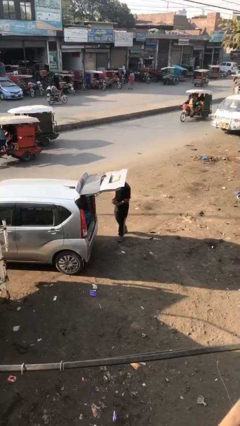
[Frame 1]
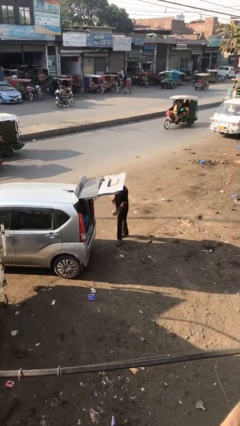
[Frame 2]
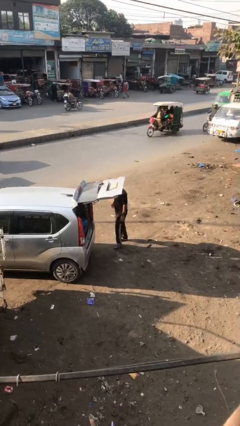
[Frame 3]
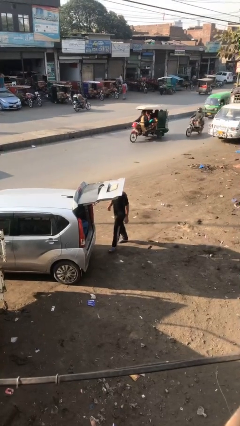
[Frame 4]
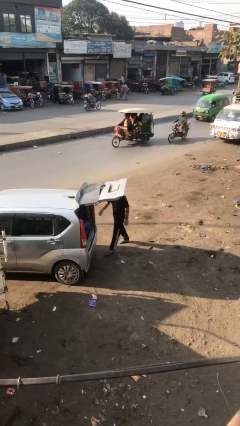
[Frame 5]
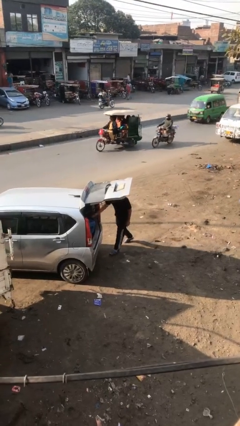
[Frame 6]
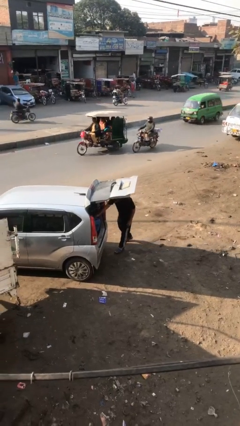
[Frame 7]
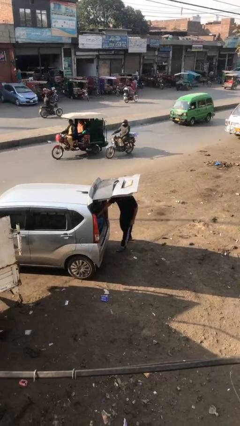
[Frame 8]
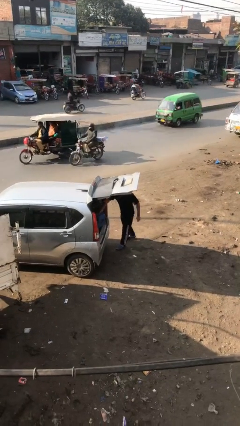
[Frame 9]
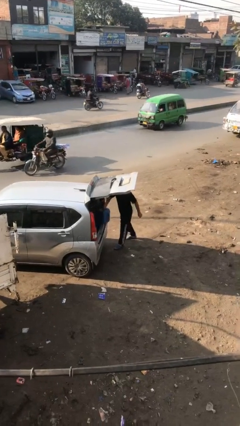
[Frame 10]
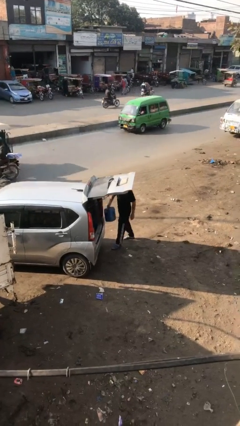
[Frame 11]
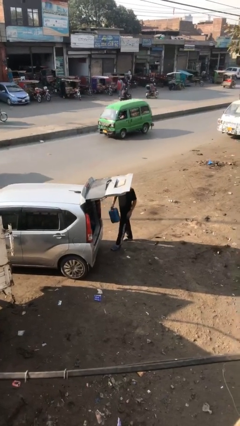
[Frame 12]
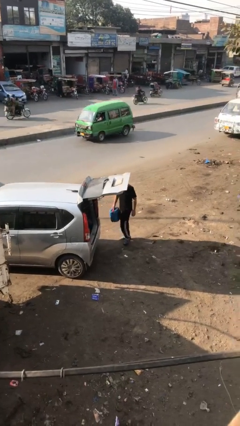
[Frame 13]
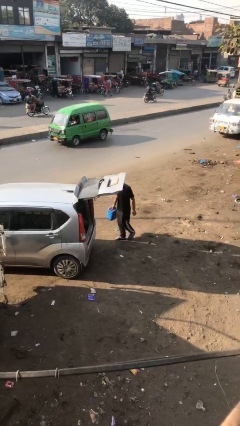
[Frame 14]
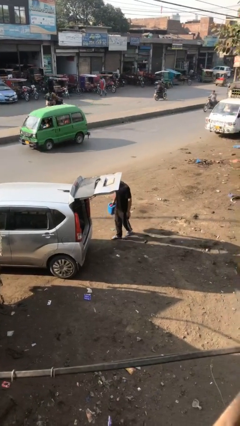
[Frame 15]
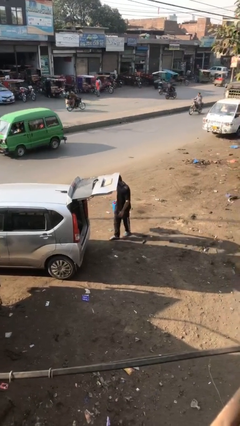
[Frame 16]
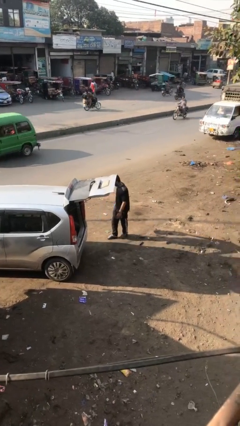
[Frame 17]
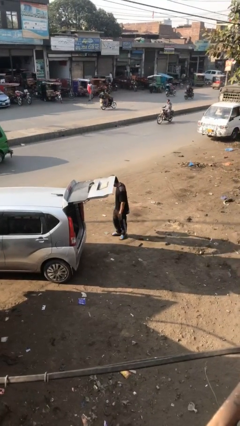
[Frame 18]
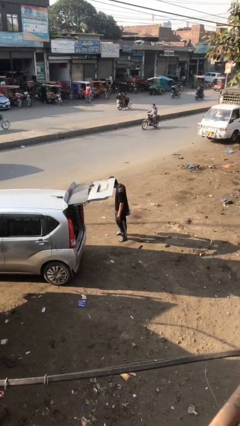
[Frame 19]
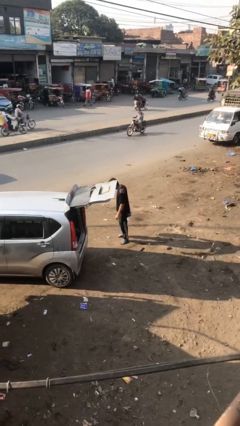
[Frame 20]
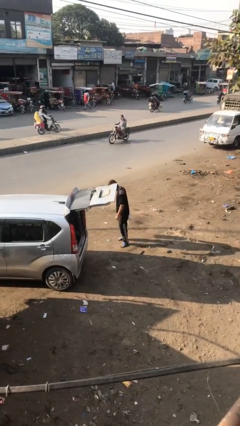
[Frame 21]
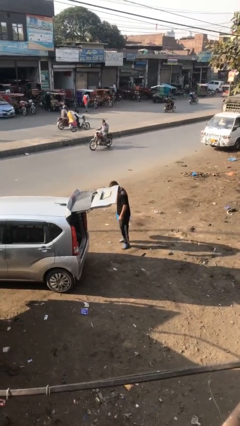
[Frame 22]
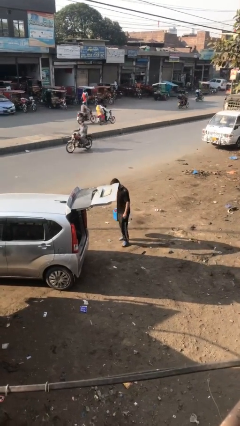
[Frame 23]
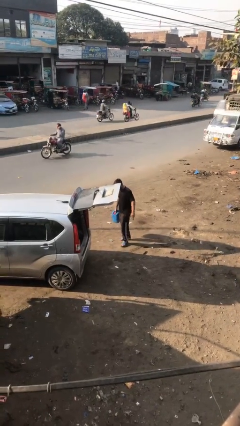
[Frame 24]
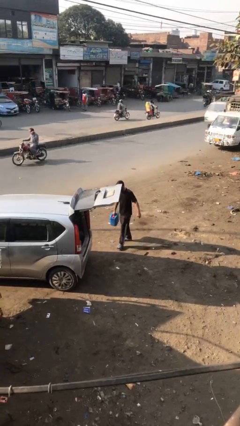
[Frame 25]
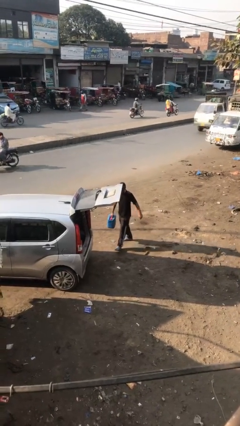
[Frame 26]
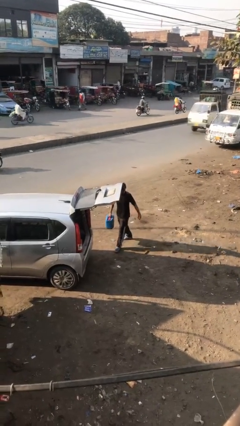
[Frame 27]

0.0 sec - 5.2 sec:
person unloads car

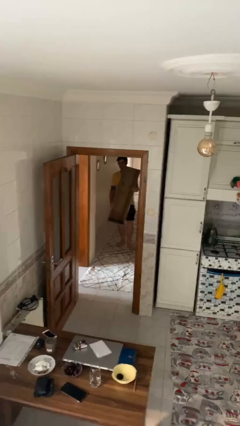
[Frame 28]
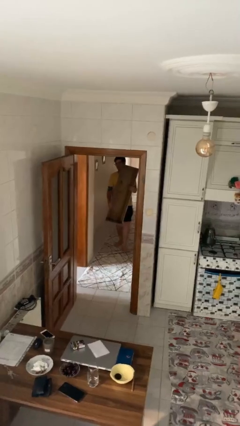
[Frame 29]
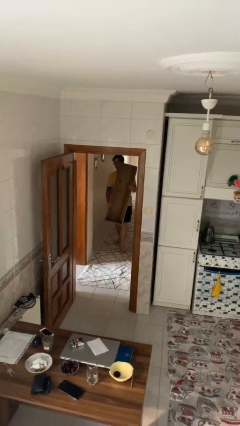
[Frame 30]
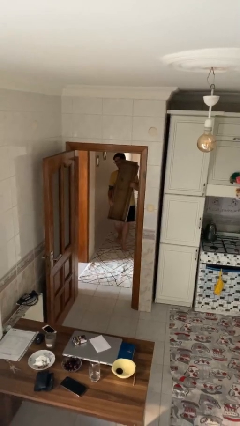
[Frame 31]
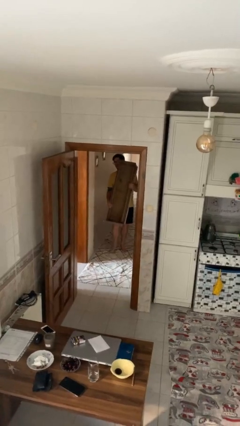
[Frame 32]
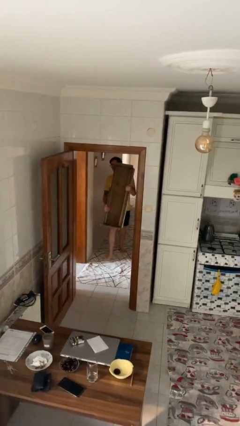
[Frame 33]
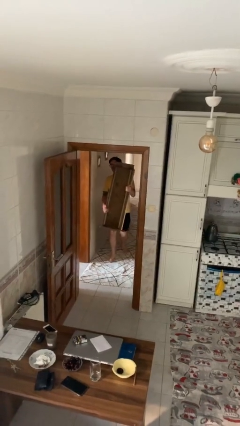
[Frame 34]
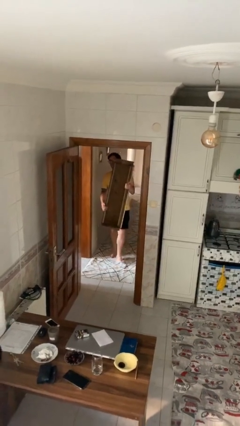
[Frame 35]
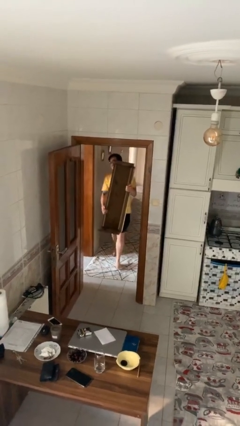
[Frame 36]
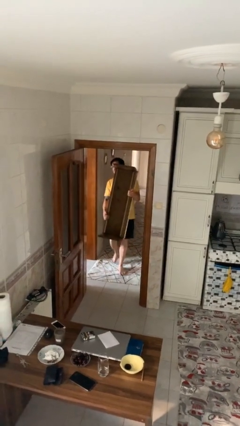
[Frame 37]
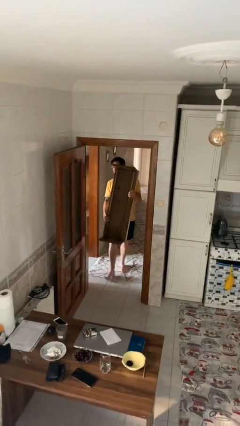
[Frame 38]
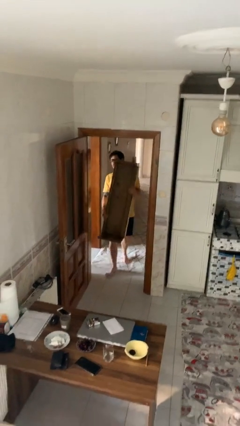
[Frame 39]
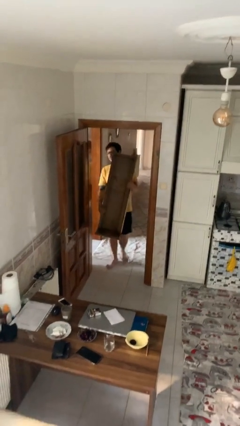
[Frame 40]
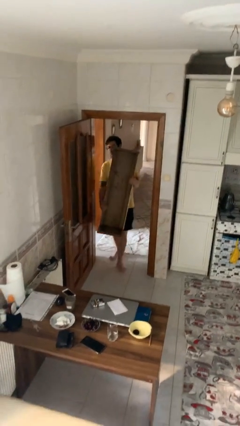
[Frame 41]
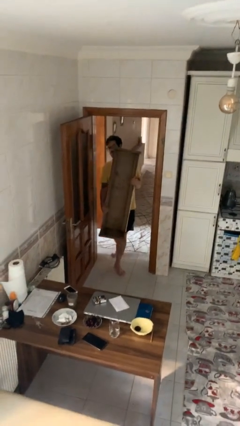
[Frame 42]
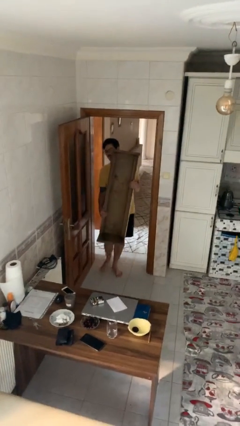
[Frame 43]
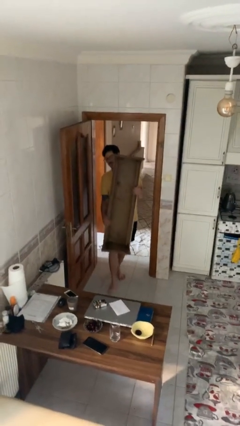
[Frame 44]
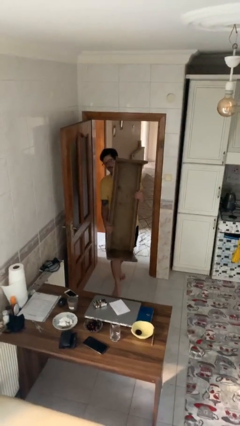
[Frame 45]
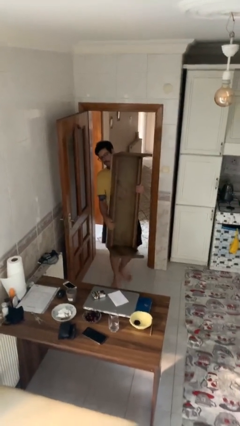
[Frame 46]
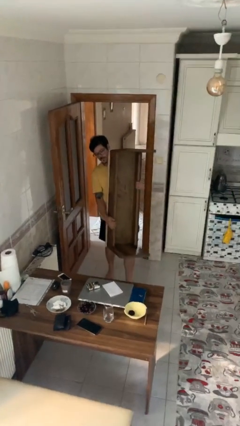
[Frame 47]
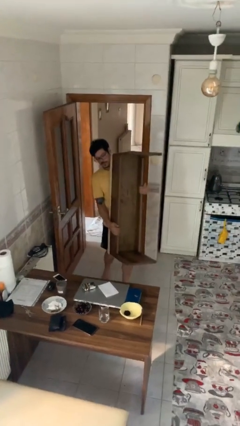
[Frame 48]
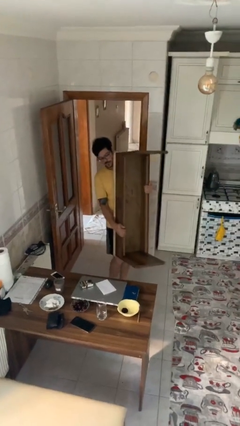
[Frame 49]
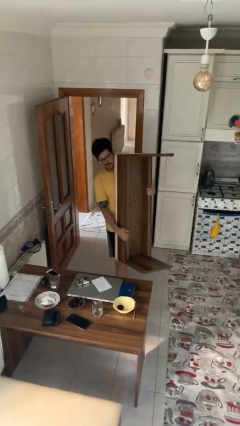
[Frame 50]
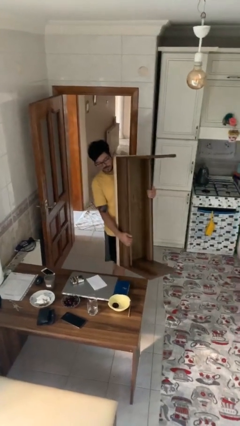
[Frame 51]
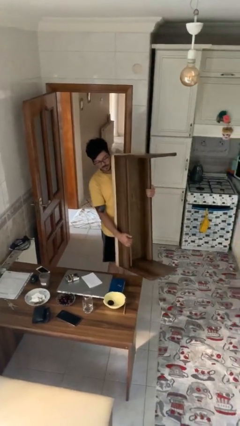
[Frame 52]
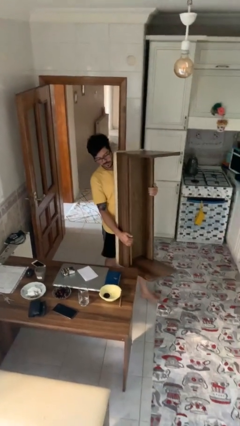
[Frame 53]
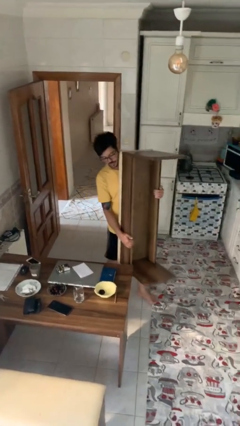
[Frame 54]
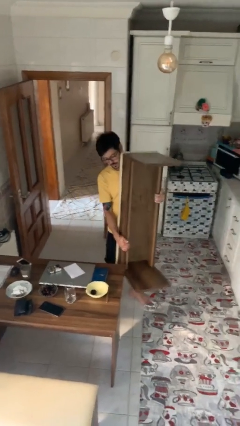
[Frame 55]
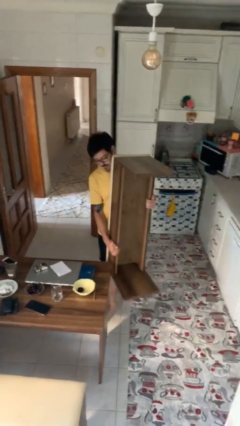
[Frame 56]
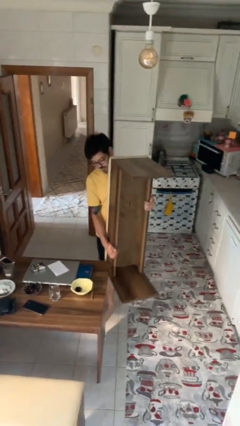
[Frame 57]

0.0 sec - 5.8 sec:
person carries heavy object

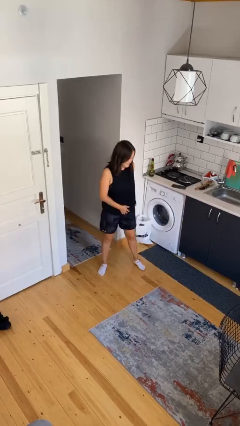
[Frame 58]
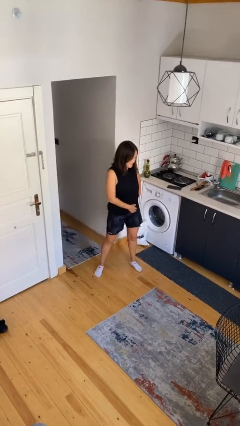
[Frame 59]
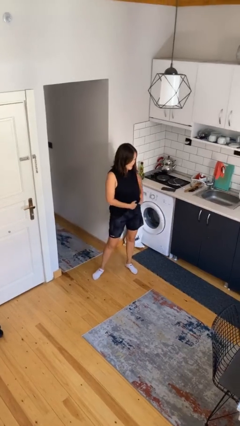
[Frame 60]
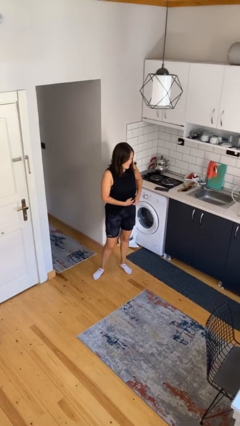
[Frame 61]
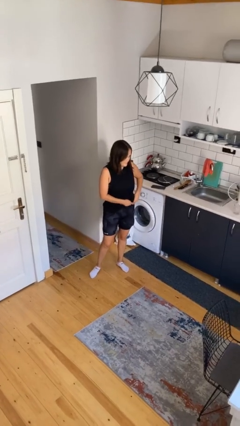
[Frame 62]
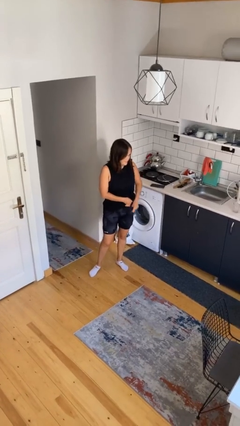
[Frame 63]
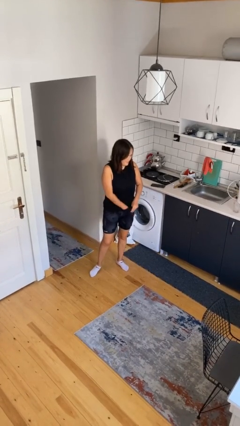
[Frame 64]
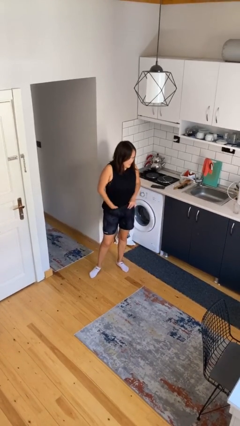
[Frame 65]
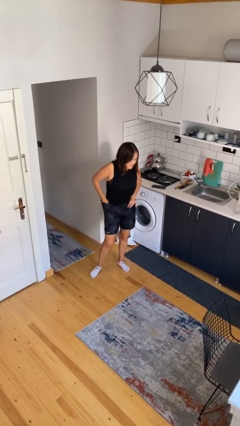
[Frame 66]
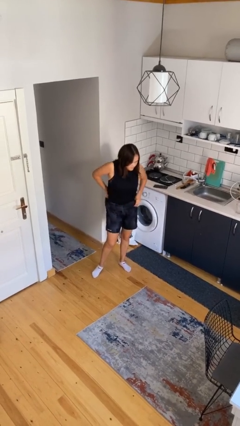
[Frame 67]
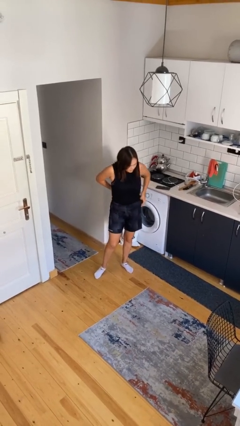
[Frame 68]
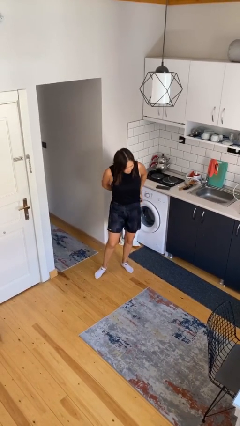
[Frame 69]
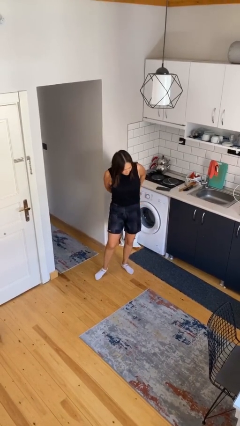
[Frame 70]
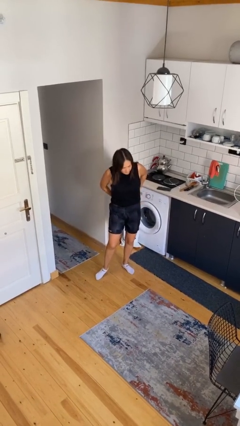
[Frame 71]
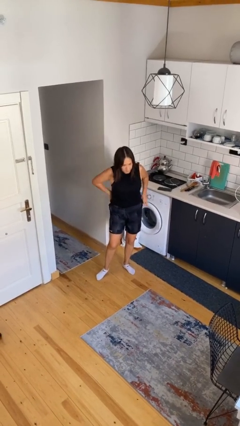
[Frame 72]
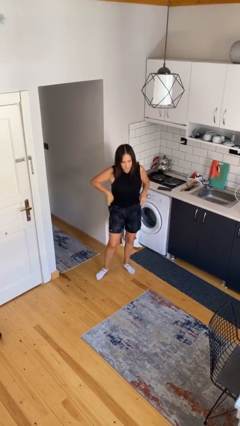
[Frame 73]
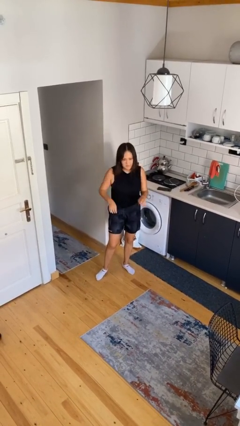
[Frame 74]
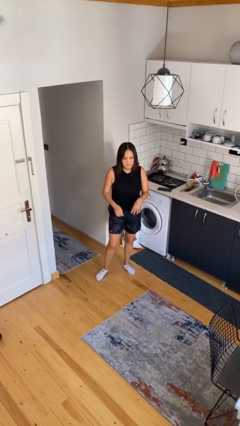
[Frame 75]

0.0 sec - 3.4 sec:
person tucks in shirt

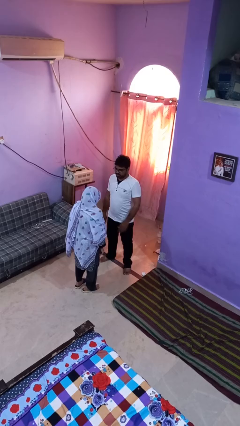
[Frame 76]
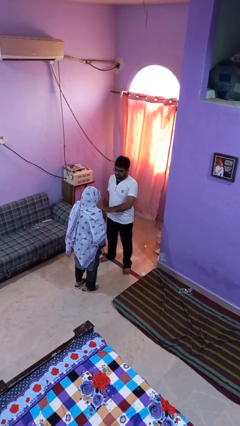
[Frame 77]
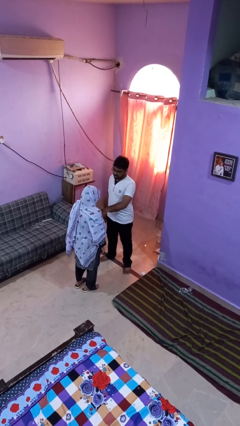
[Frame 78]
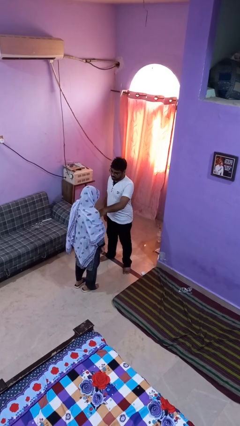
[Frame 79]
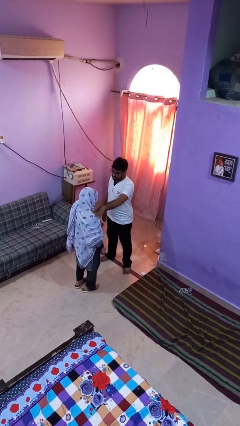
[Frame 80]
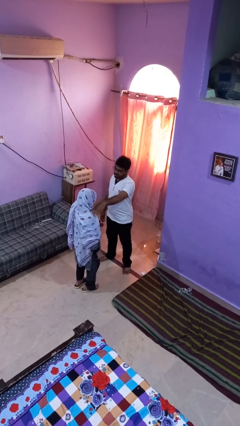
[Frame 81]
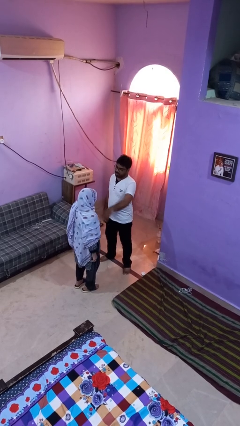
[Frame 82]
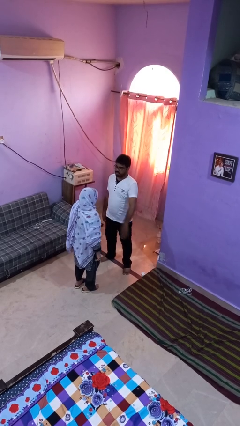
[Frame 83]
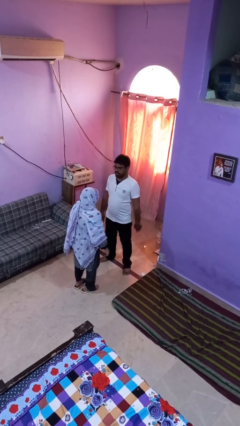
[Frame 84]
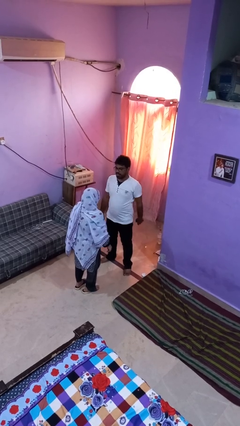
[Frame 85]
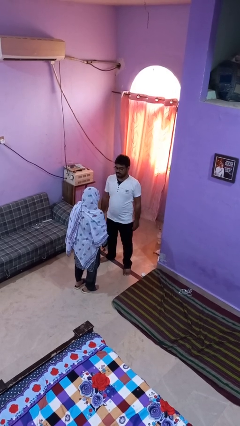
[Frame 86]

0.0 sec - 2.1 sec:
person shoves person

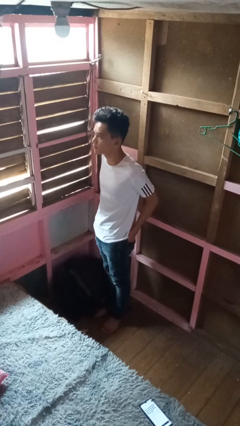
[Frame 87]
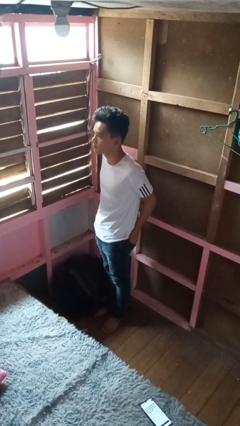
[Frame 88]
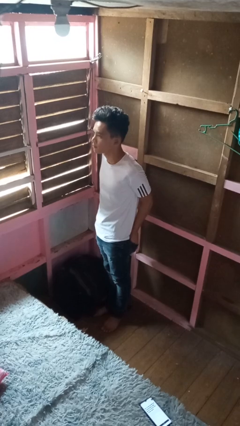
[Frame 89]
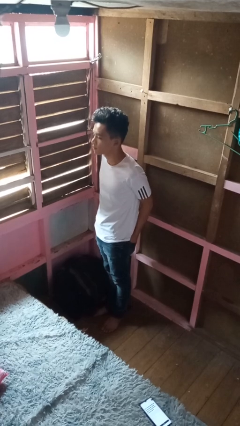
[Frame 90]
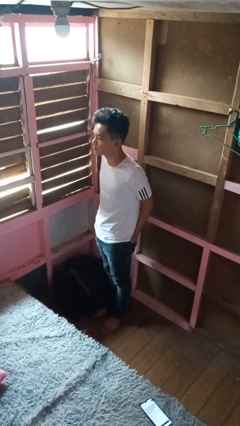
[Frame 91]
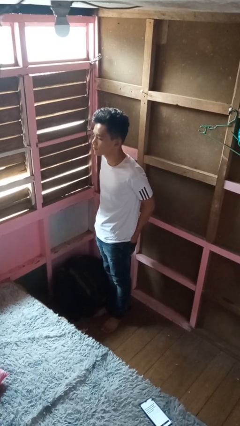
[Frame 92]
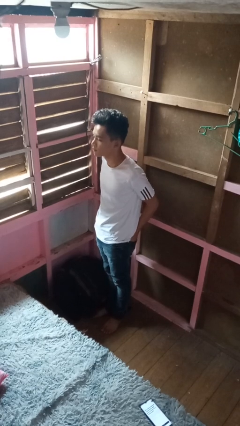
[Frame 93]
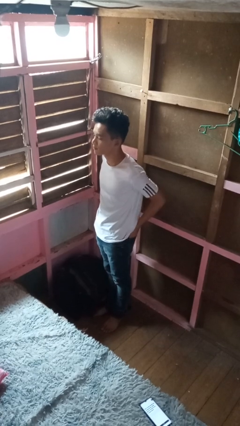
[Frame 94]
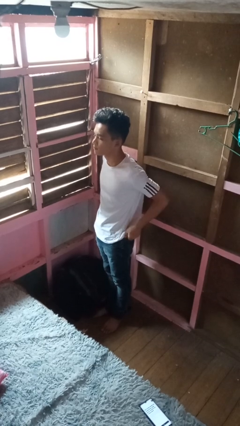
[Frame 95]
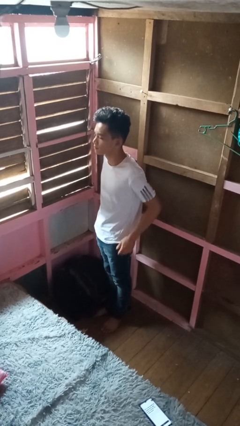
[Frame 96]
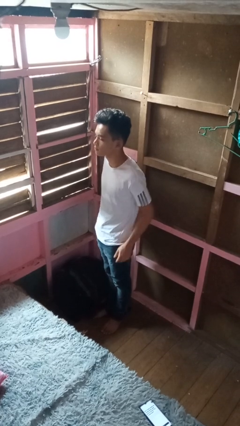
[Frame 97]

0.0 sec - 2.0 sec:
person puts hands in back pockets
